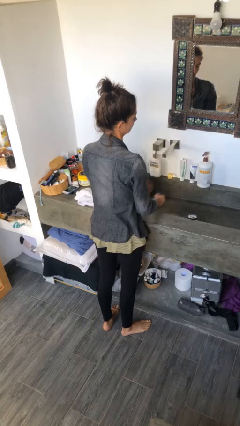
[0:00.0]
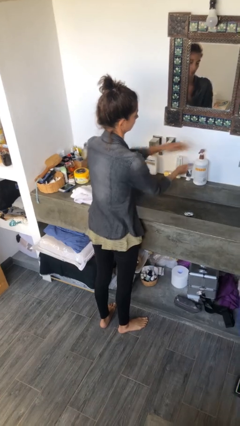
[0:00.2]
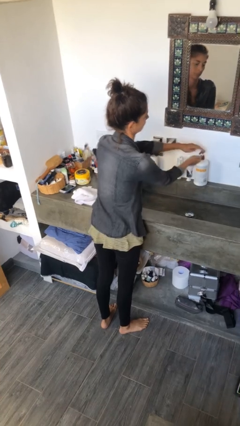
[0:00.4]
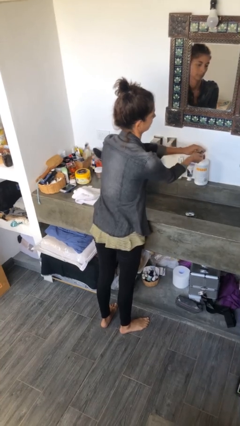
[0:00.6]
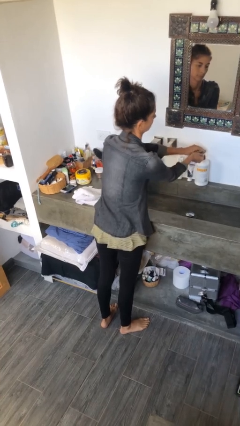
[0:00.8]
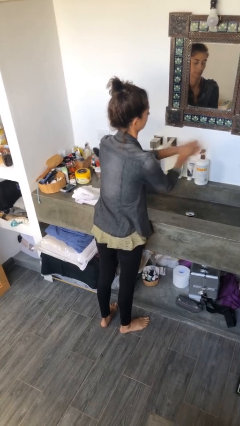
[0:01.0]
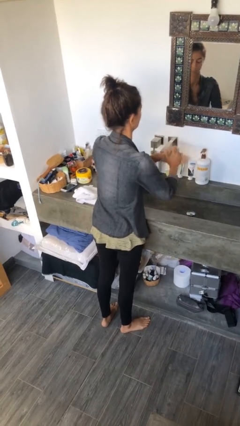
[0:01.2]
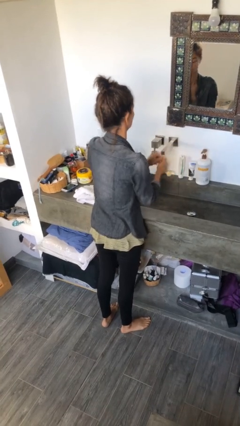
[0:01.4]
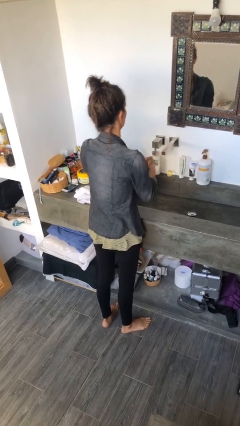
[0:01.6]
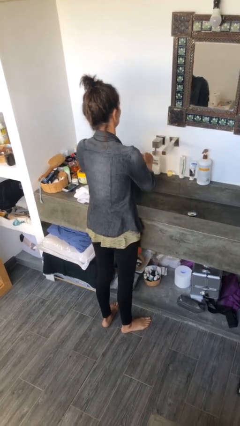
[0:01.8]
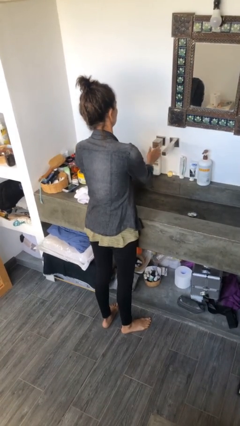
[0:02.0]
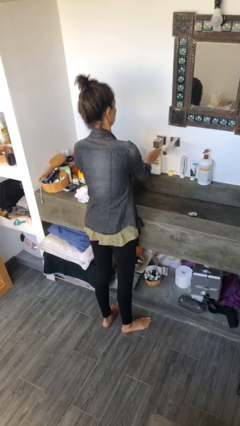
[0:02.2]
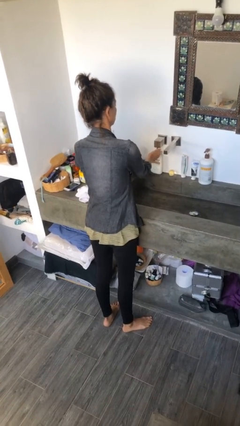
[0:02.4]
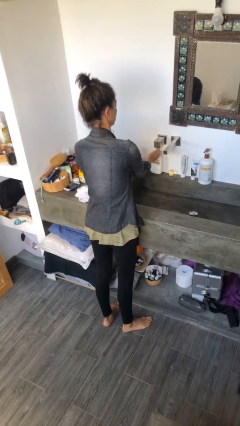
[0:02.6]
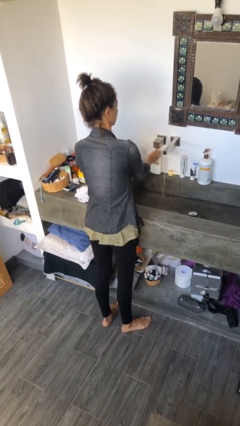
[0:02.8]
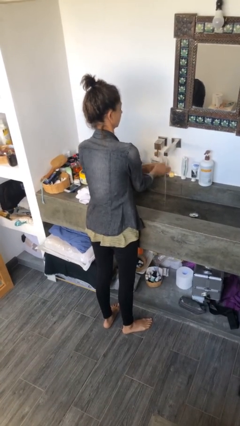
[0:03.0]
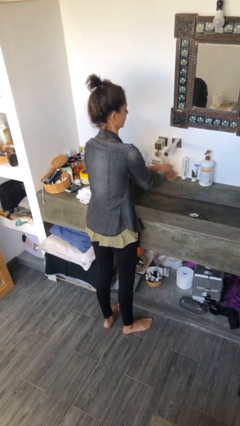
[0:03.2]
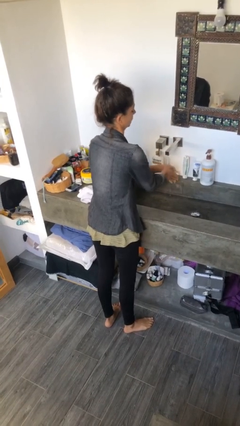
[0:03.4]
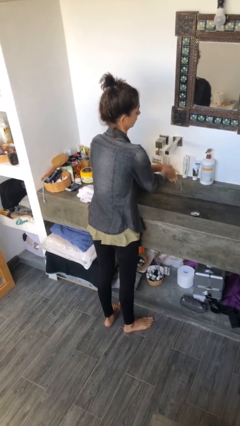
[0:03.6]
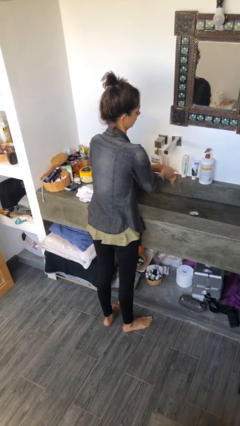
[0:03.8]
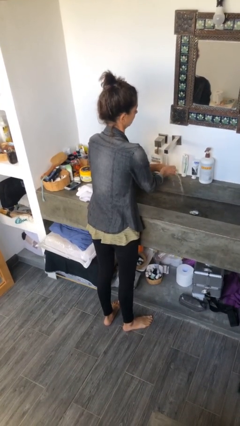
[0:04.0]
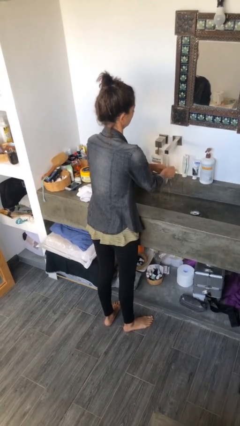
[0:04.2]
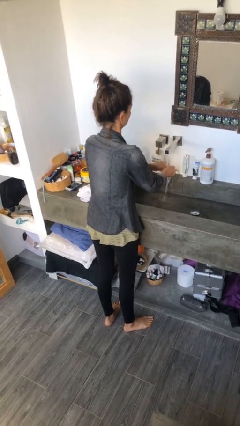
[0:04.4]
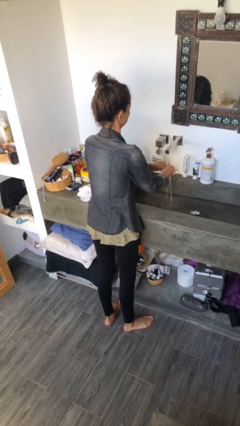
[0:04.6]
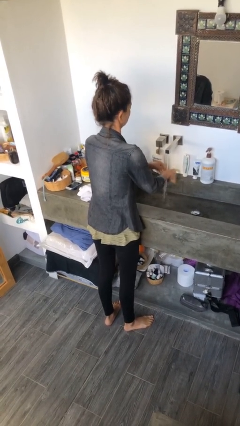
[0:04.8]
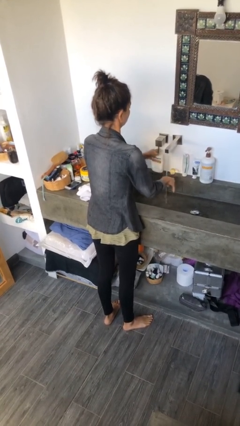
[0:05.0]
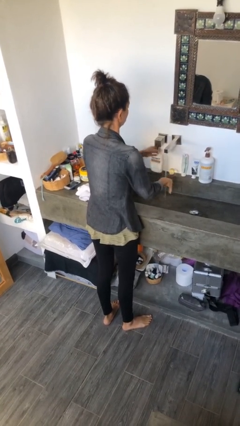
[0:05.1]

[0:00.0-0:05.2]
person washes hands

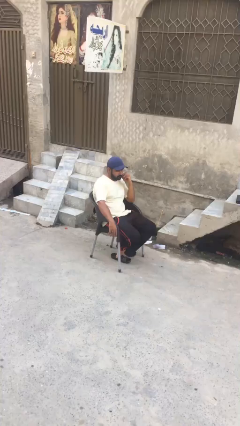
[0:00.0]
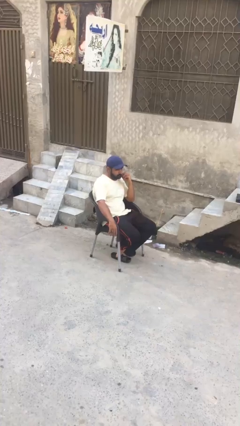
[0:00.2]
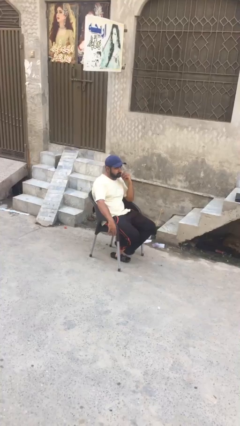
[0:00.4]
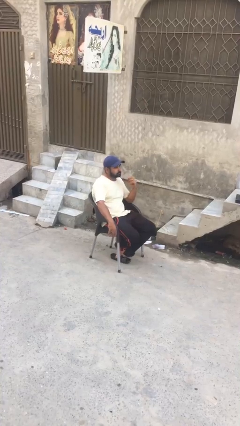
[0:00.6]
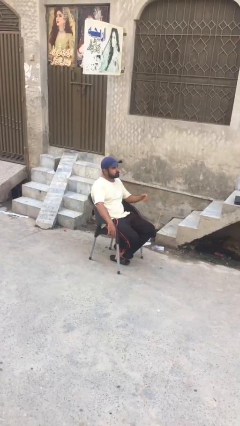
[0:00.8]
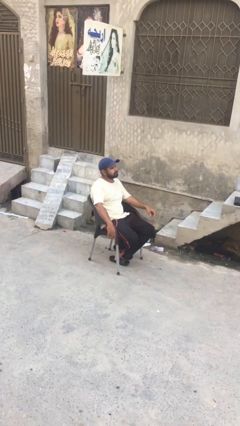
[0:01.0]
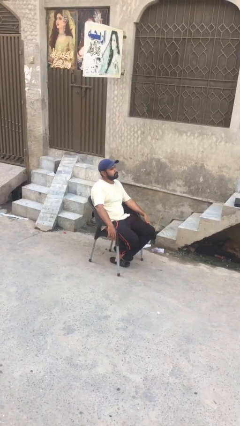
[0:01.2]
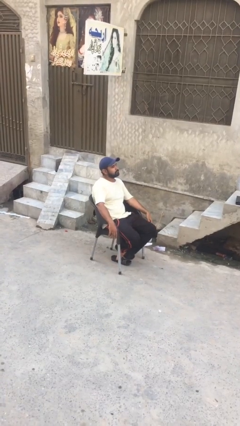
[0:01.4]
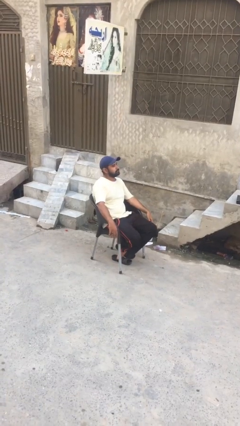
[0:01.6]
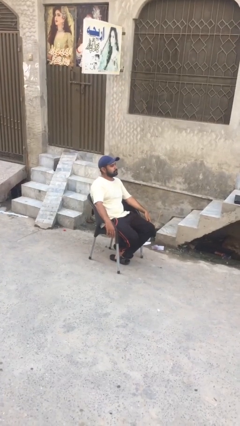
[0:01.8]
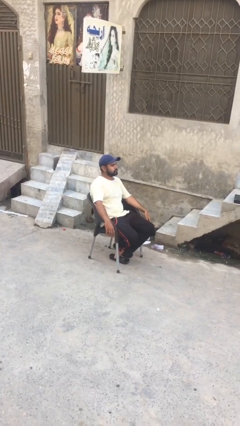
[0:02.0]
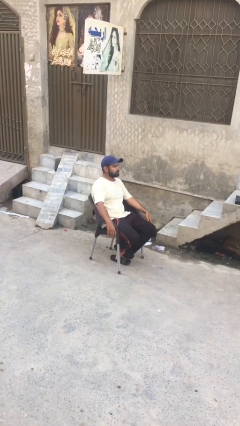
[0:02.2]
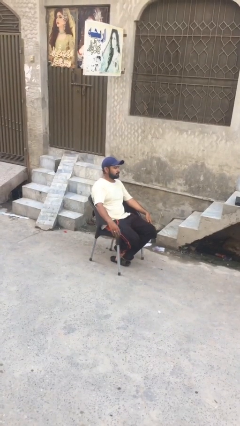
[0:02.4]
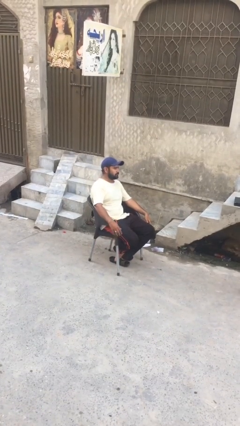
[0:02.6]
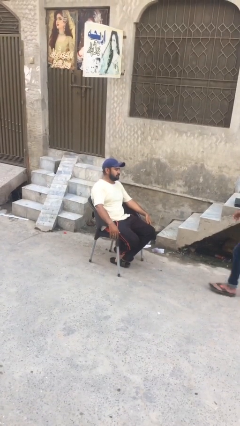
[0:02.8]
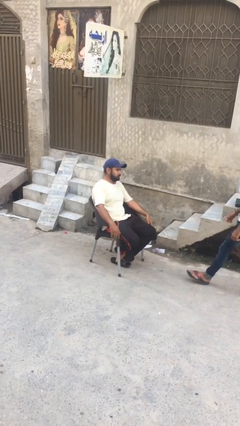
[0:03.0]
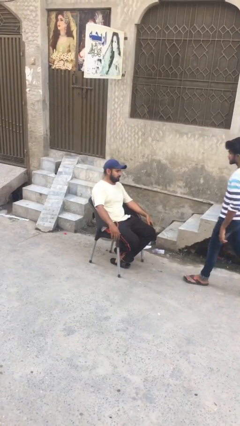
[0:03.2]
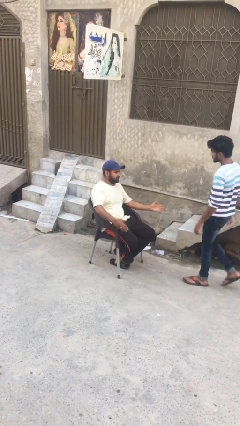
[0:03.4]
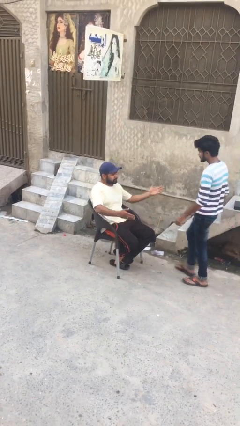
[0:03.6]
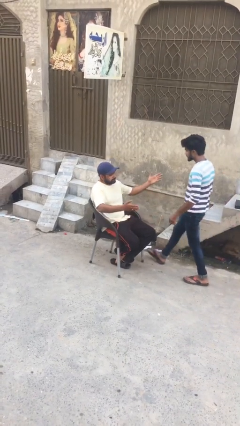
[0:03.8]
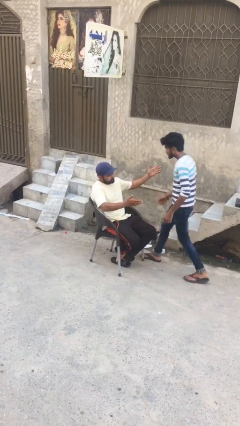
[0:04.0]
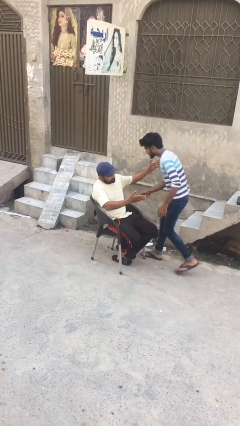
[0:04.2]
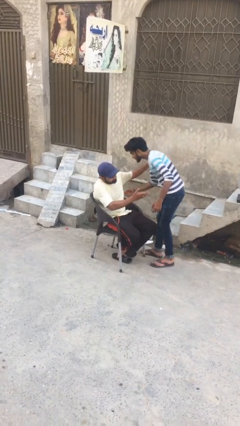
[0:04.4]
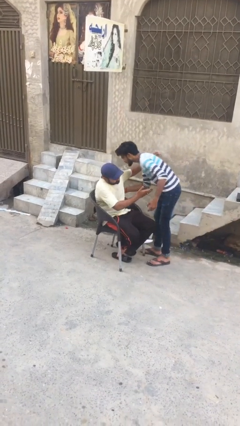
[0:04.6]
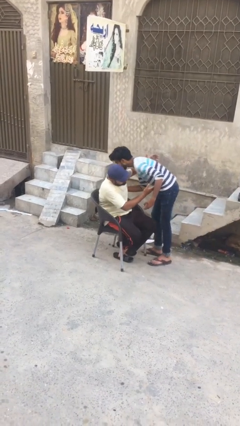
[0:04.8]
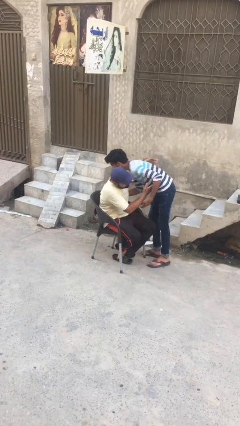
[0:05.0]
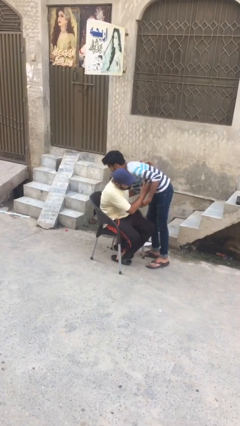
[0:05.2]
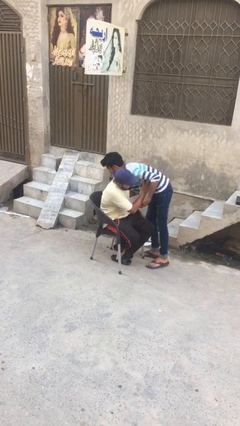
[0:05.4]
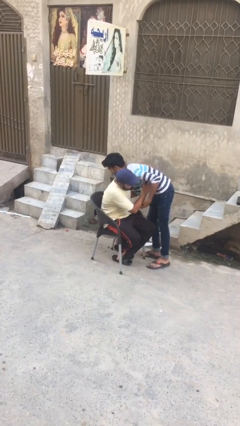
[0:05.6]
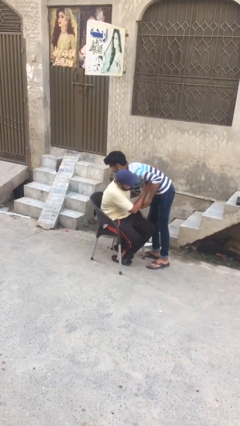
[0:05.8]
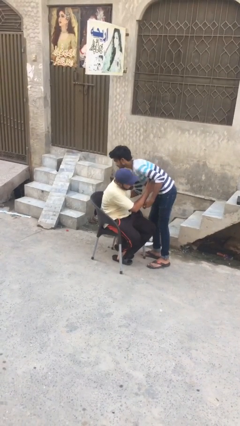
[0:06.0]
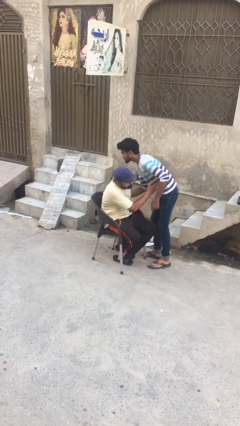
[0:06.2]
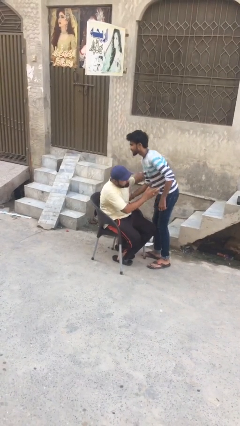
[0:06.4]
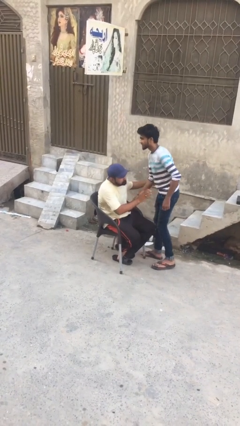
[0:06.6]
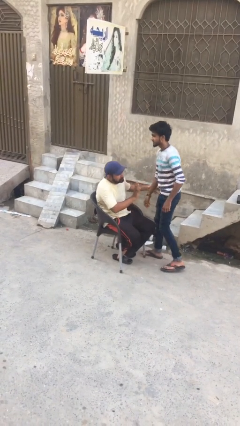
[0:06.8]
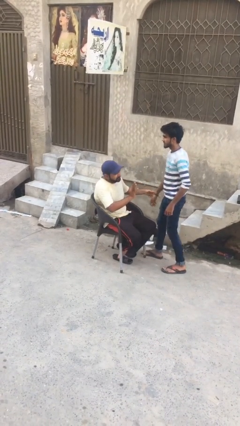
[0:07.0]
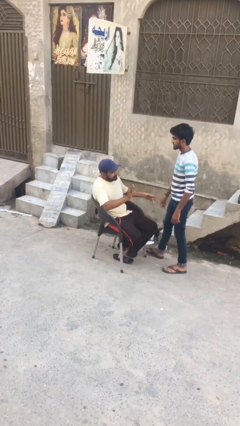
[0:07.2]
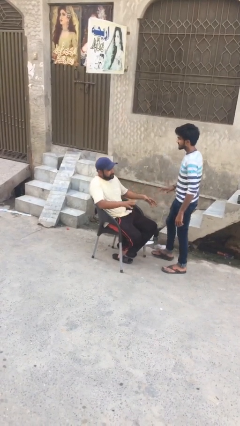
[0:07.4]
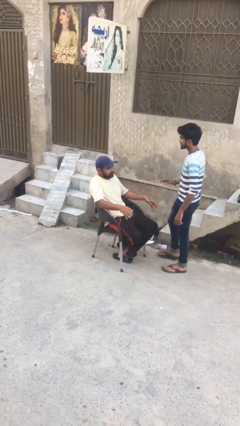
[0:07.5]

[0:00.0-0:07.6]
person embraces person

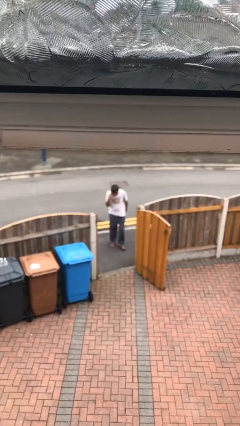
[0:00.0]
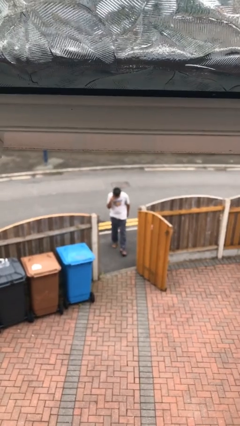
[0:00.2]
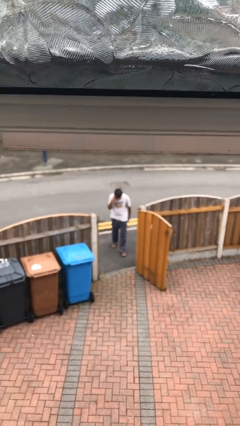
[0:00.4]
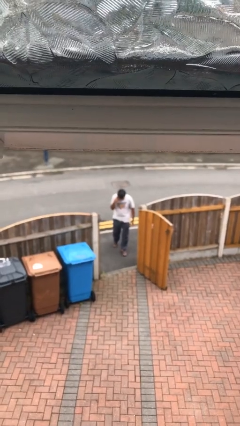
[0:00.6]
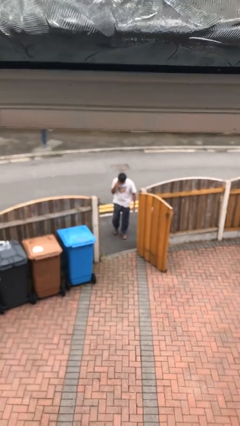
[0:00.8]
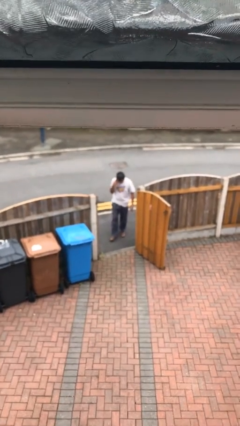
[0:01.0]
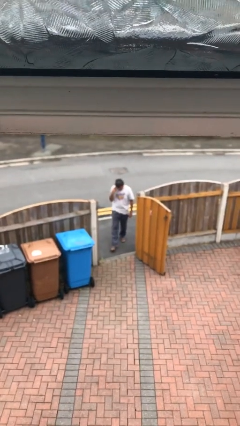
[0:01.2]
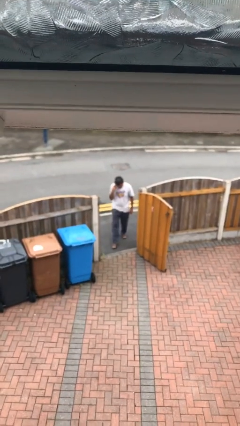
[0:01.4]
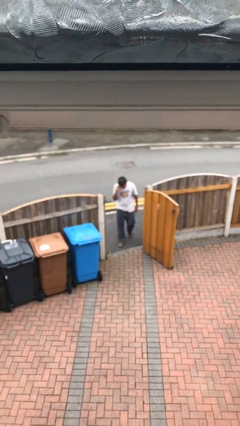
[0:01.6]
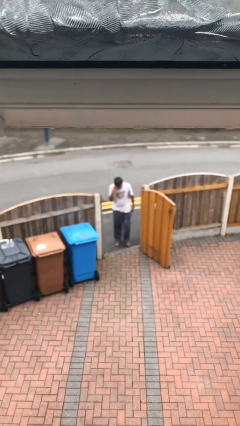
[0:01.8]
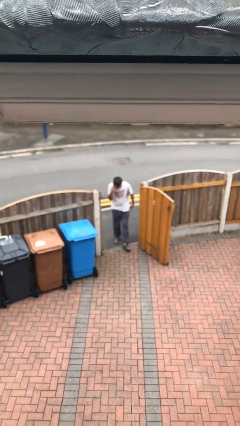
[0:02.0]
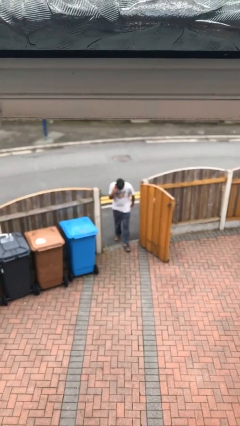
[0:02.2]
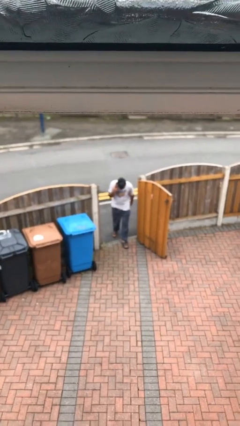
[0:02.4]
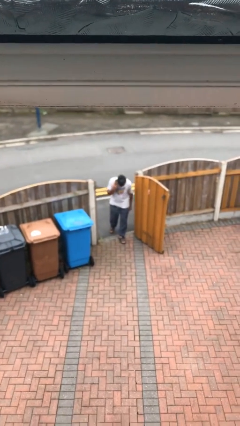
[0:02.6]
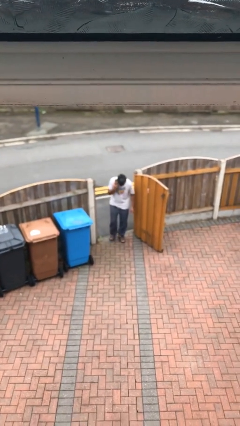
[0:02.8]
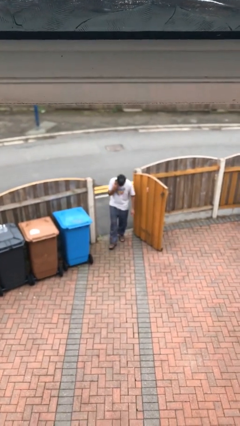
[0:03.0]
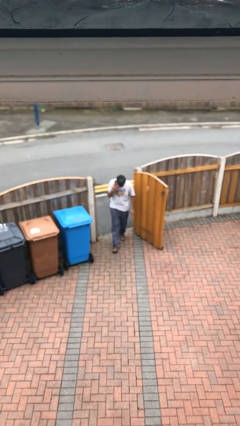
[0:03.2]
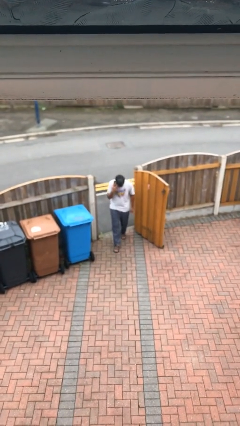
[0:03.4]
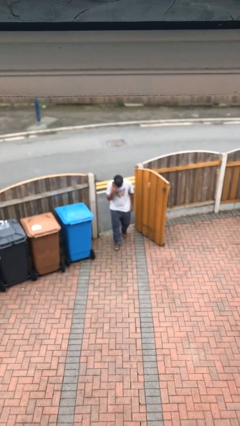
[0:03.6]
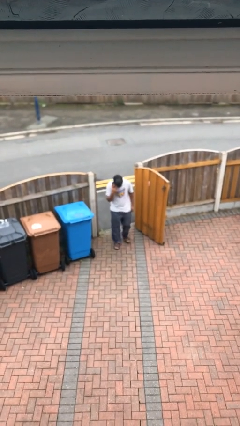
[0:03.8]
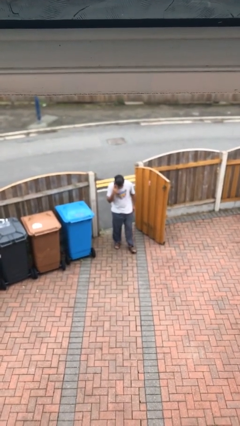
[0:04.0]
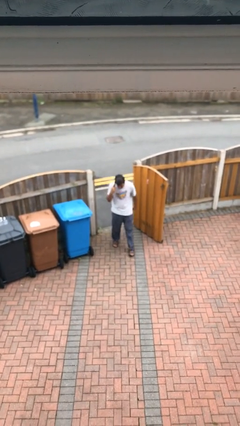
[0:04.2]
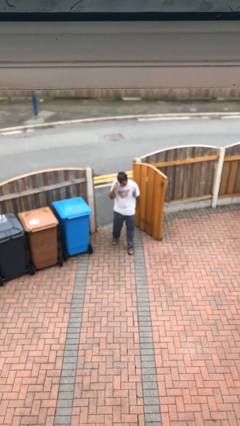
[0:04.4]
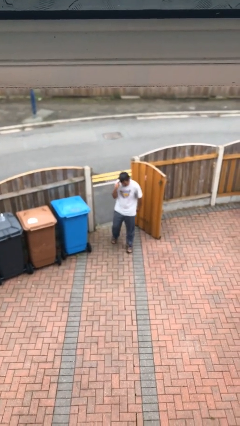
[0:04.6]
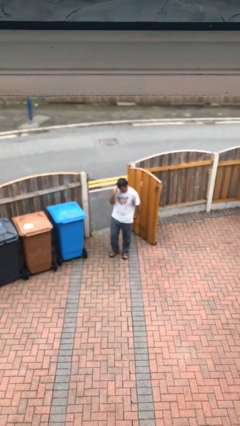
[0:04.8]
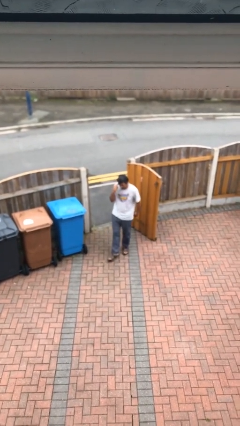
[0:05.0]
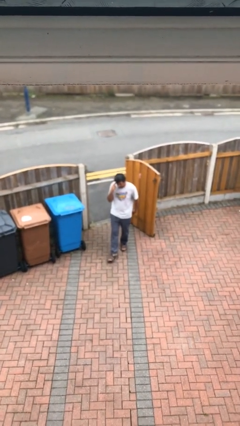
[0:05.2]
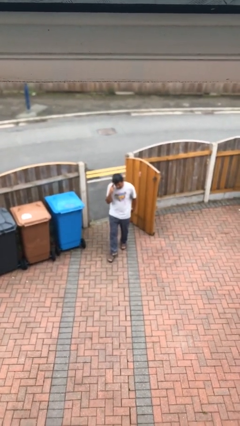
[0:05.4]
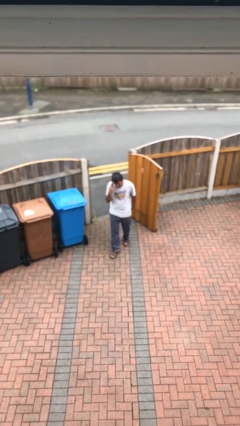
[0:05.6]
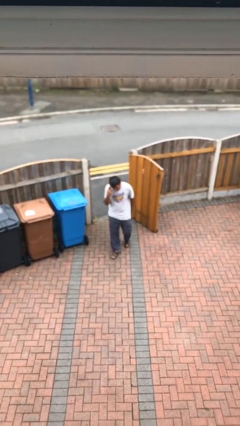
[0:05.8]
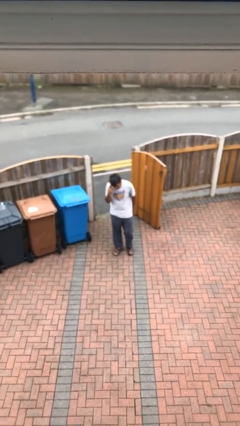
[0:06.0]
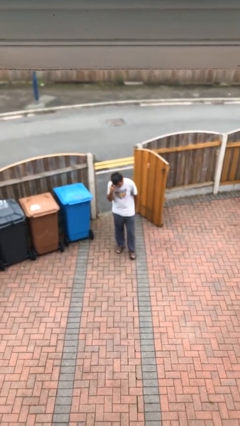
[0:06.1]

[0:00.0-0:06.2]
person enters scene through structure
